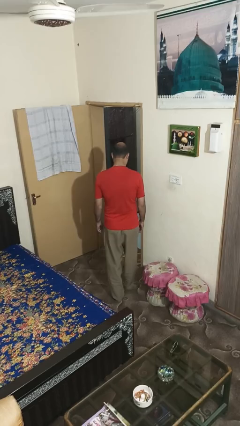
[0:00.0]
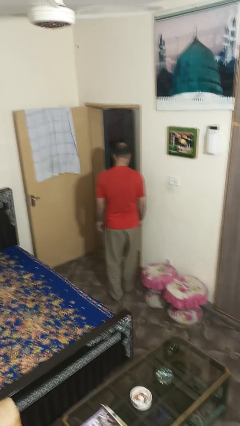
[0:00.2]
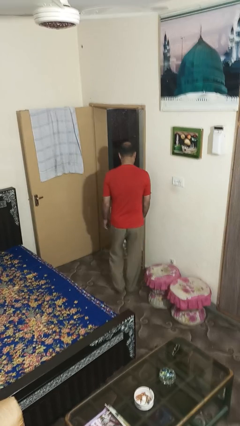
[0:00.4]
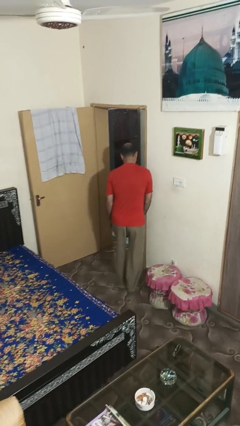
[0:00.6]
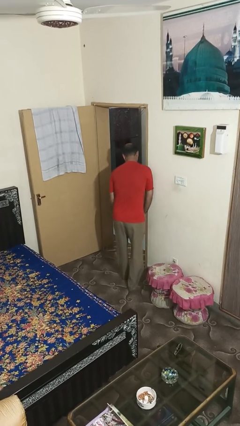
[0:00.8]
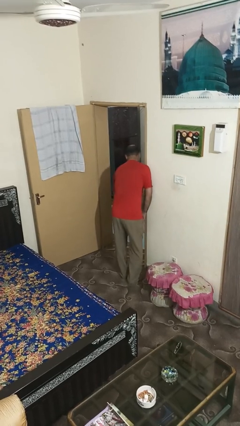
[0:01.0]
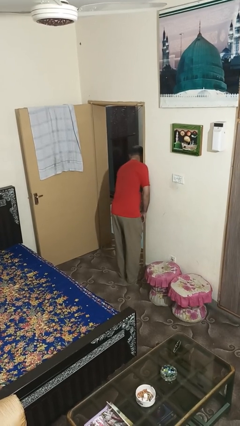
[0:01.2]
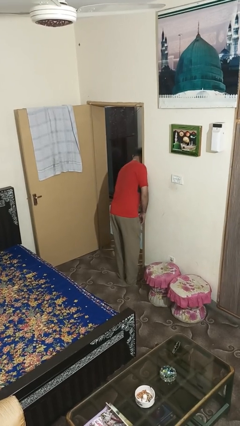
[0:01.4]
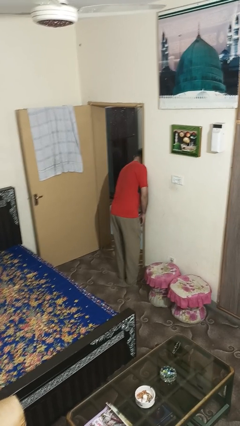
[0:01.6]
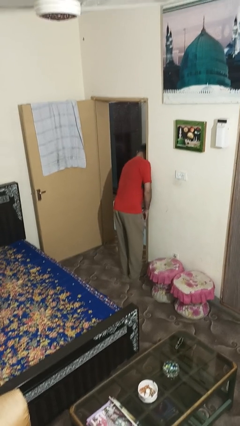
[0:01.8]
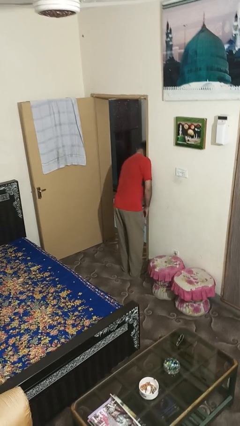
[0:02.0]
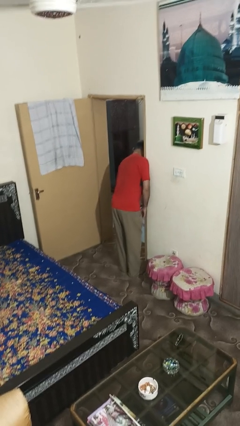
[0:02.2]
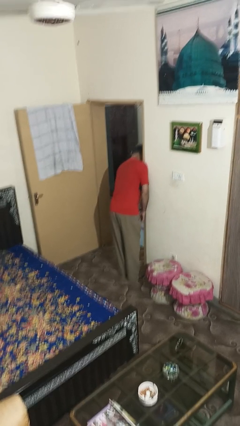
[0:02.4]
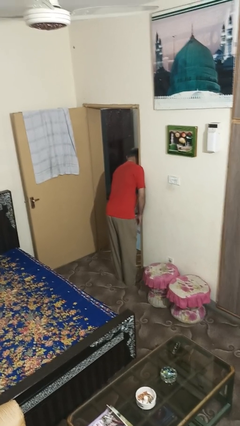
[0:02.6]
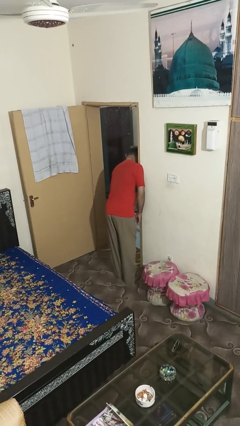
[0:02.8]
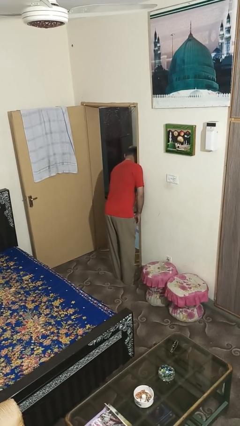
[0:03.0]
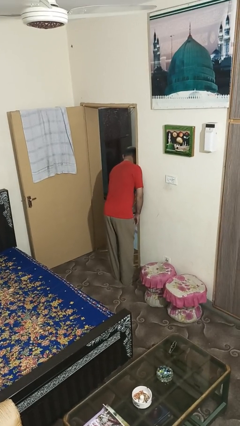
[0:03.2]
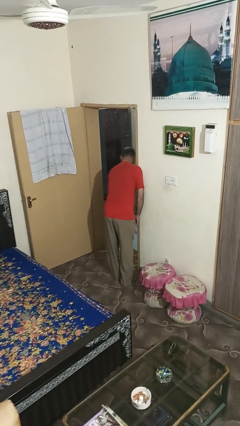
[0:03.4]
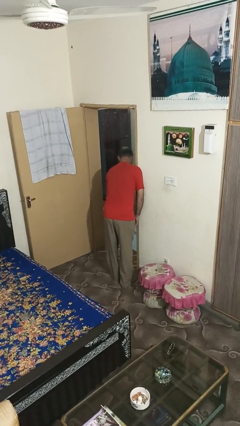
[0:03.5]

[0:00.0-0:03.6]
person bumps into wall

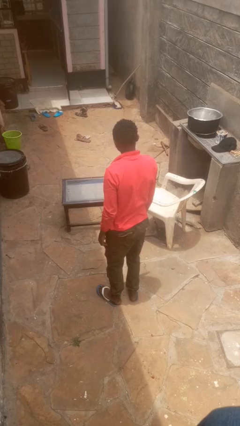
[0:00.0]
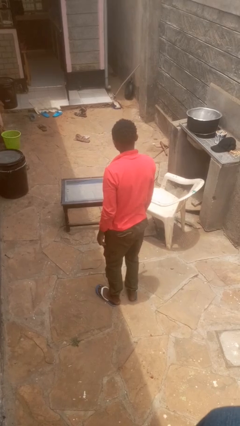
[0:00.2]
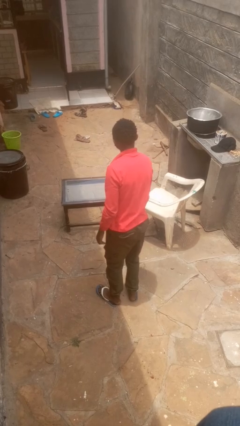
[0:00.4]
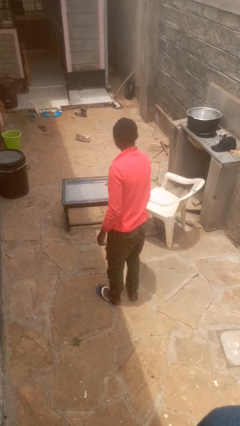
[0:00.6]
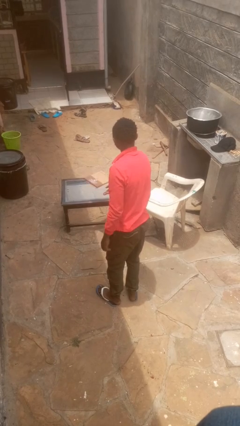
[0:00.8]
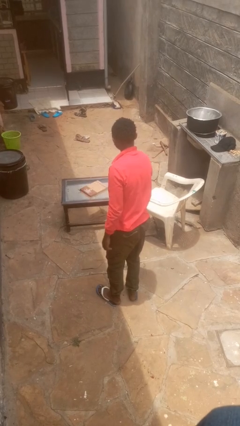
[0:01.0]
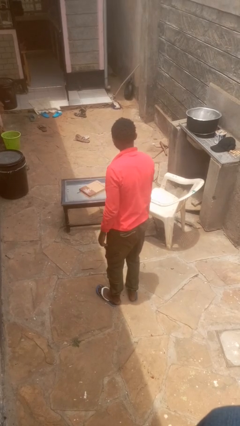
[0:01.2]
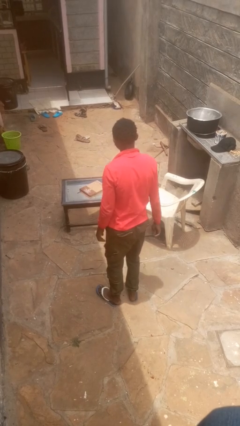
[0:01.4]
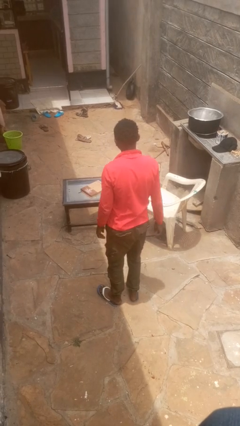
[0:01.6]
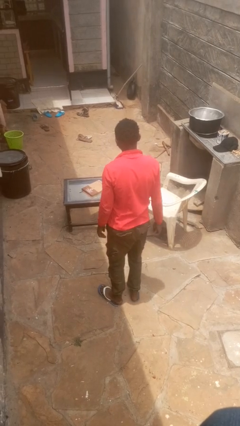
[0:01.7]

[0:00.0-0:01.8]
person throws object on table

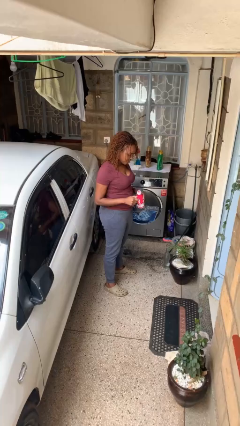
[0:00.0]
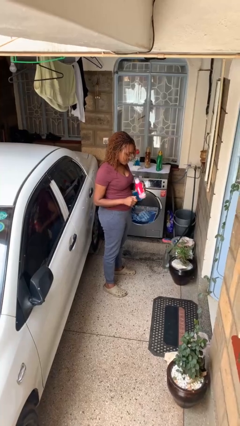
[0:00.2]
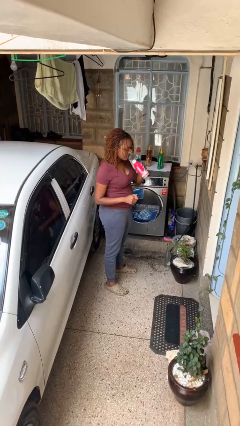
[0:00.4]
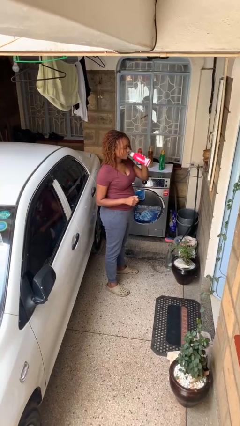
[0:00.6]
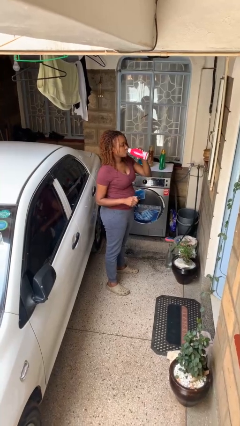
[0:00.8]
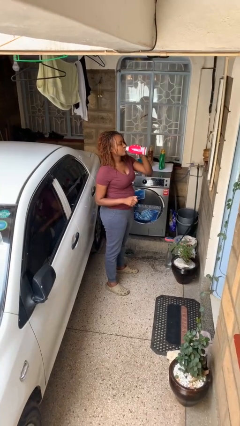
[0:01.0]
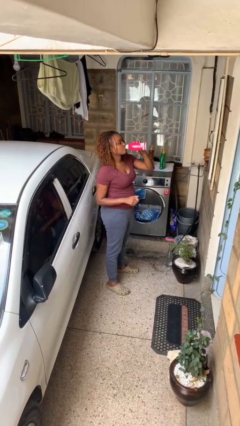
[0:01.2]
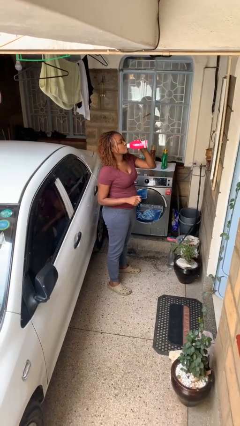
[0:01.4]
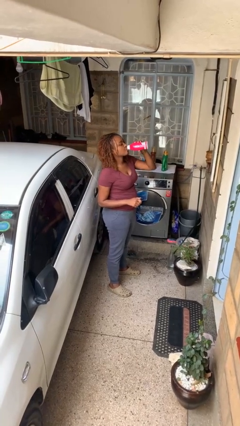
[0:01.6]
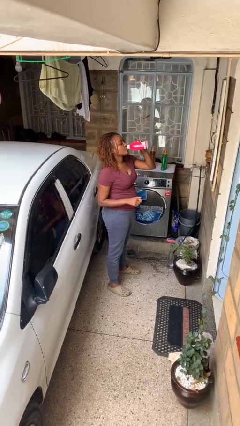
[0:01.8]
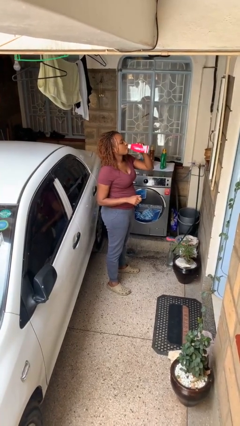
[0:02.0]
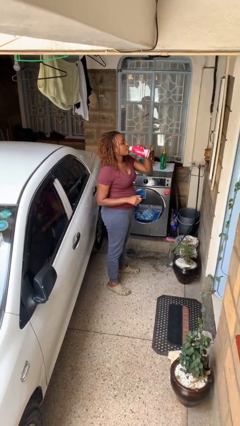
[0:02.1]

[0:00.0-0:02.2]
person drinks from beverage can

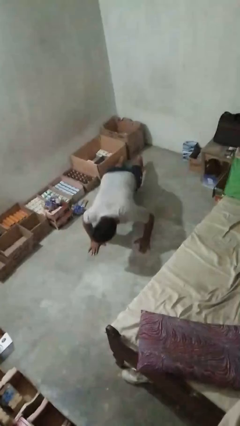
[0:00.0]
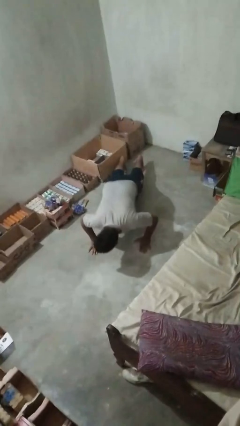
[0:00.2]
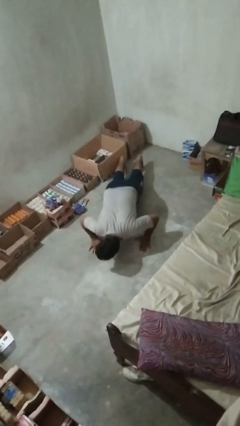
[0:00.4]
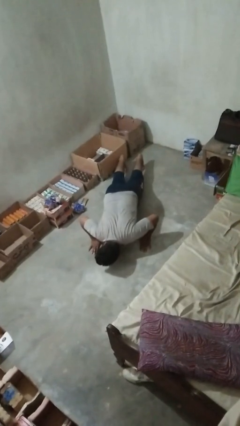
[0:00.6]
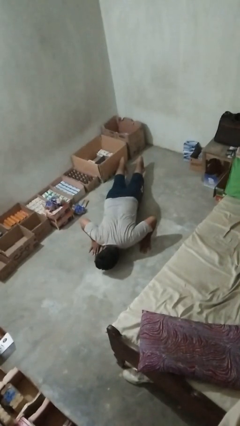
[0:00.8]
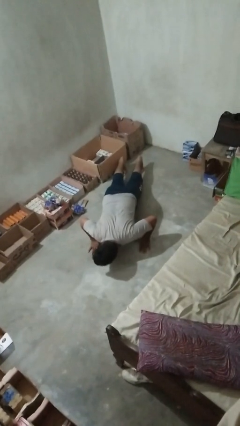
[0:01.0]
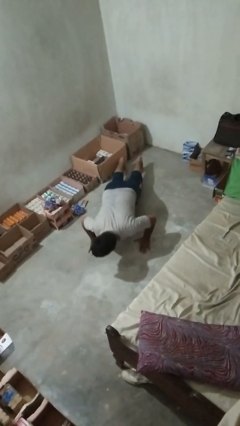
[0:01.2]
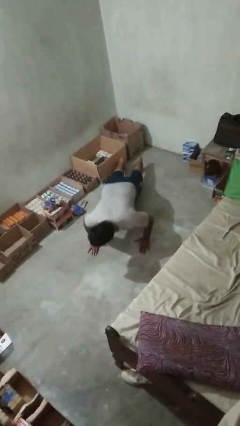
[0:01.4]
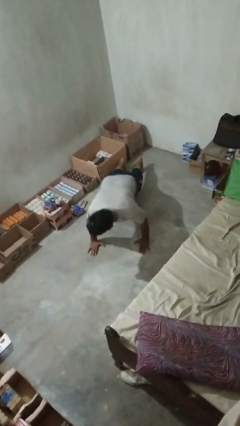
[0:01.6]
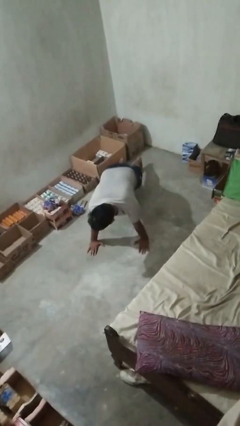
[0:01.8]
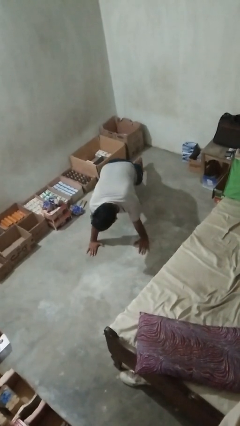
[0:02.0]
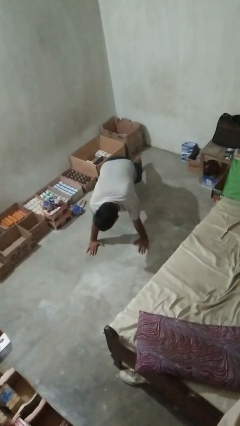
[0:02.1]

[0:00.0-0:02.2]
person exercises with pushup

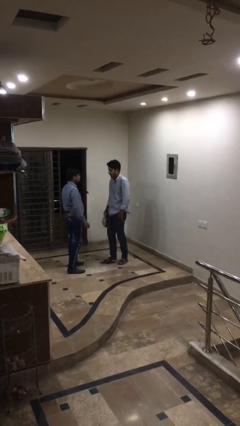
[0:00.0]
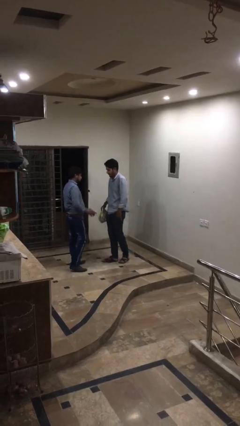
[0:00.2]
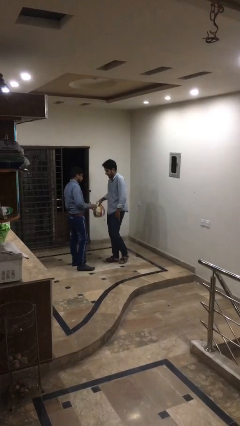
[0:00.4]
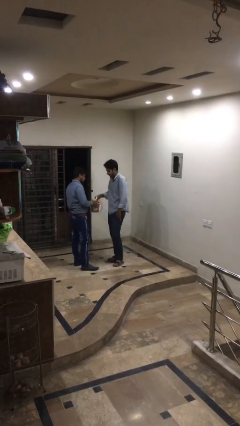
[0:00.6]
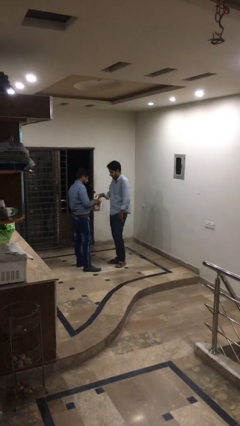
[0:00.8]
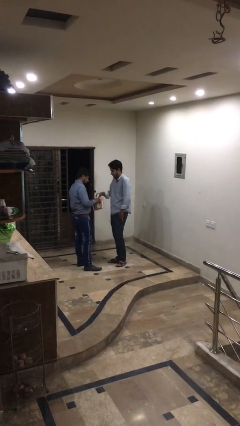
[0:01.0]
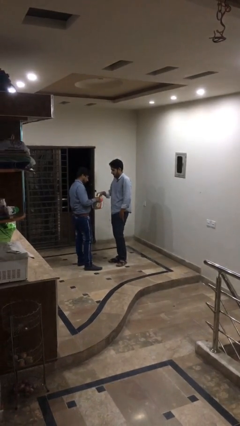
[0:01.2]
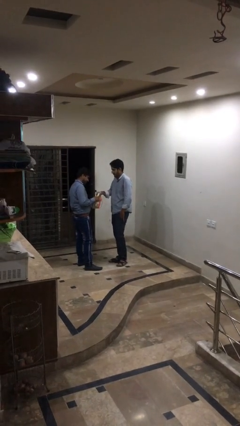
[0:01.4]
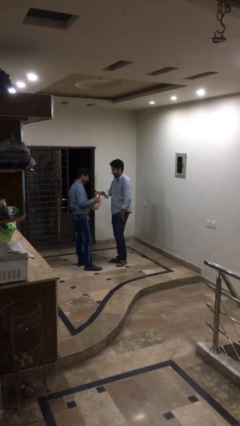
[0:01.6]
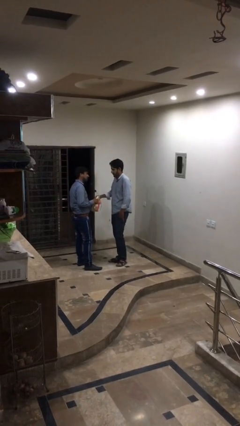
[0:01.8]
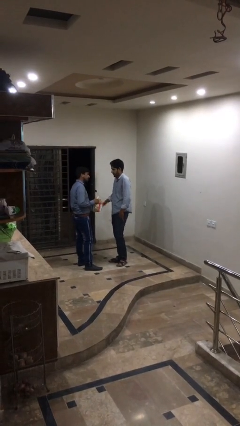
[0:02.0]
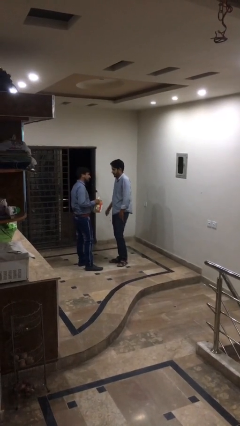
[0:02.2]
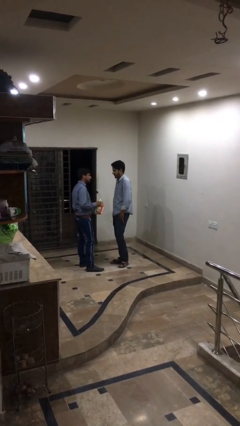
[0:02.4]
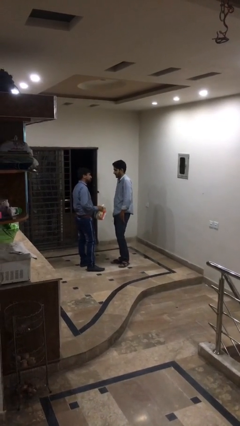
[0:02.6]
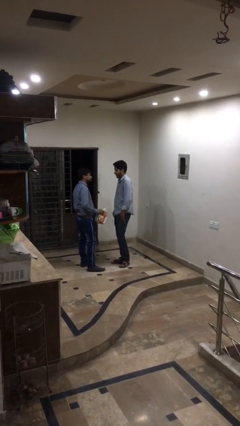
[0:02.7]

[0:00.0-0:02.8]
person transfers object to person

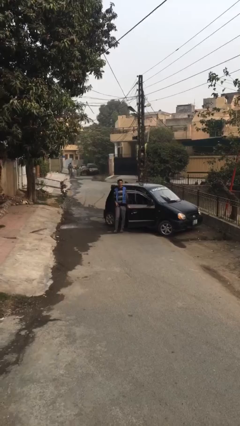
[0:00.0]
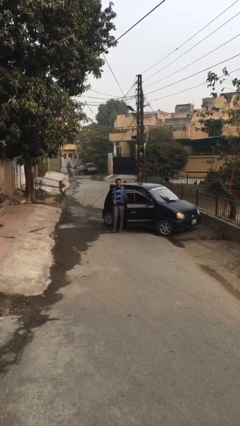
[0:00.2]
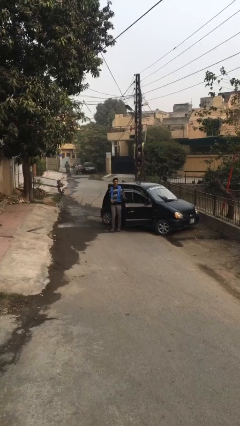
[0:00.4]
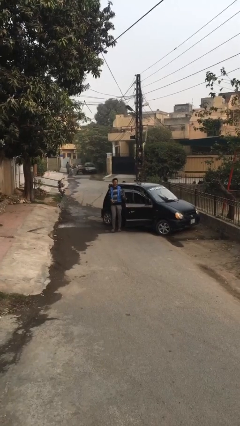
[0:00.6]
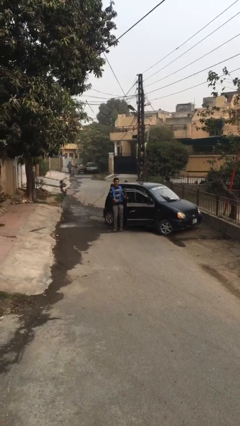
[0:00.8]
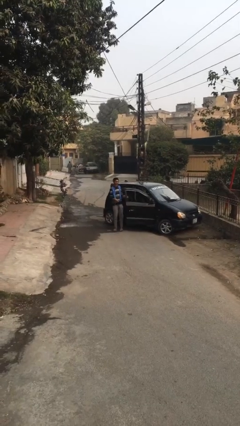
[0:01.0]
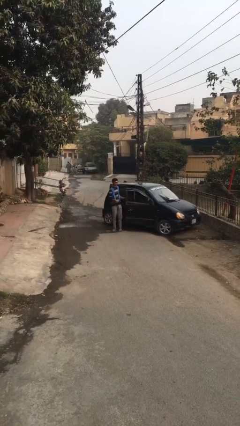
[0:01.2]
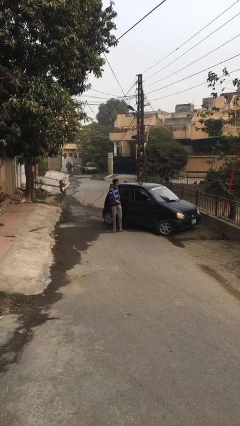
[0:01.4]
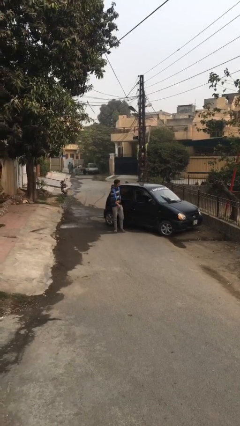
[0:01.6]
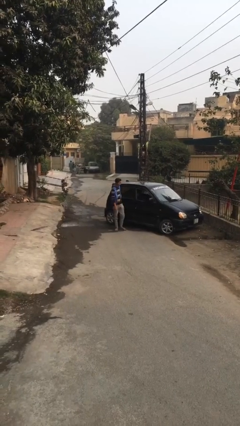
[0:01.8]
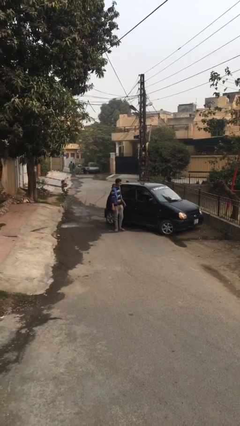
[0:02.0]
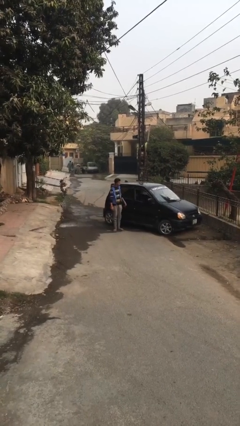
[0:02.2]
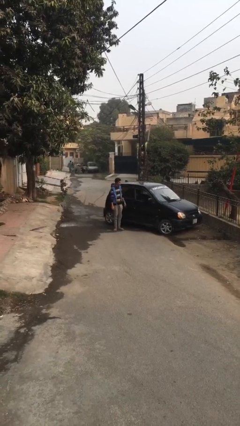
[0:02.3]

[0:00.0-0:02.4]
person closes car door

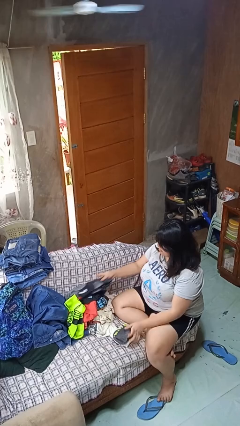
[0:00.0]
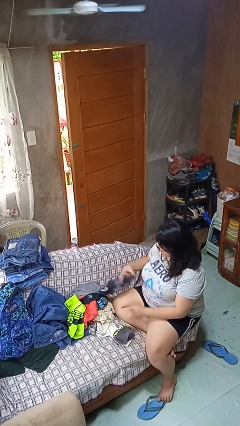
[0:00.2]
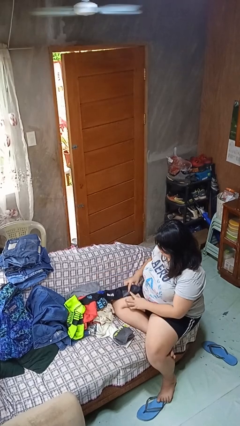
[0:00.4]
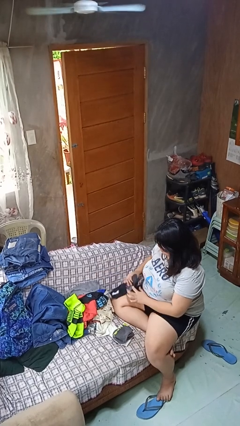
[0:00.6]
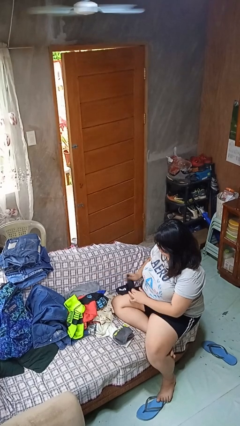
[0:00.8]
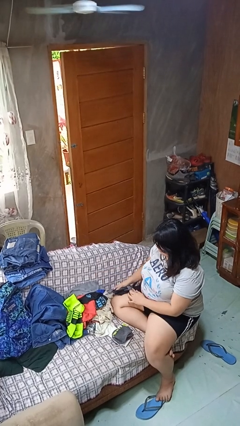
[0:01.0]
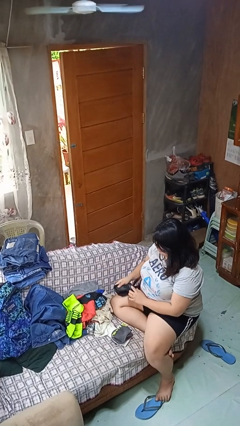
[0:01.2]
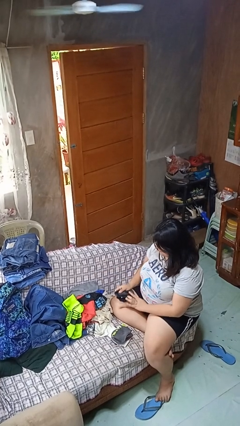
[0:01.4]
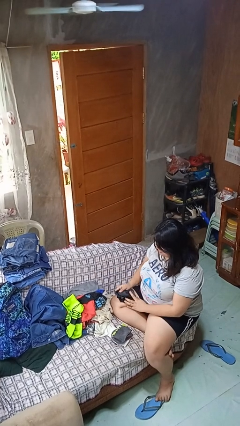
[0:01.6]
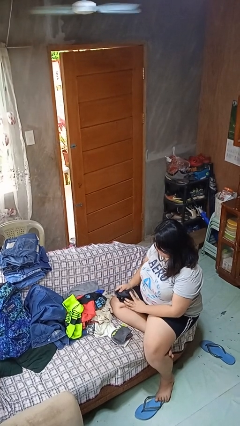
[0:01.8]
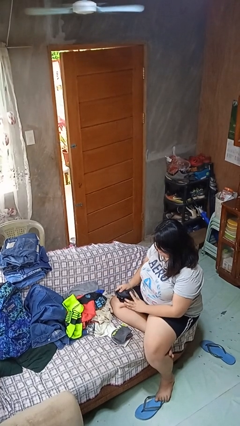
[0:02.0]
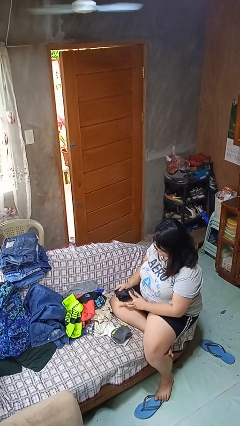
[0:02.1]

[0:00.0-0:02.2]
person folds socks
